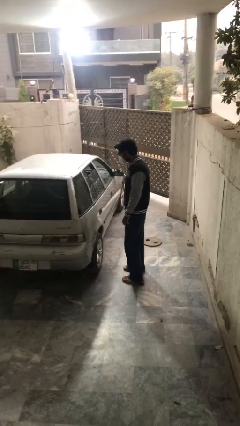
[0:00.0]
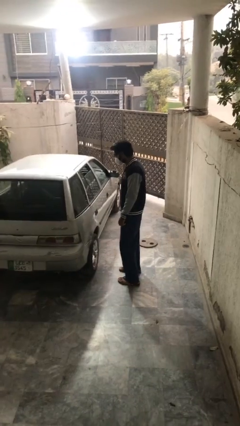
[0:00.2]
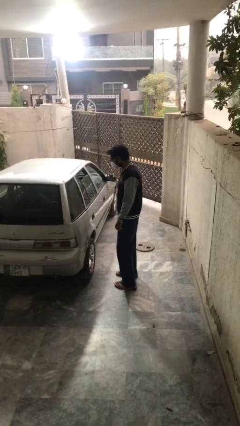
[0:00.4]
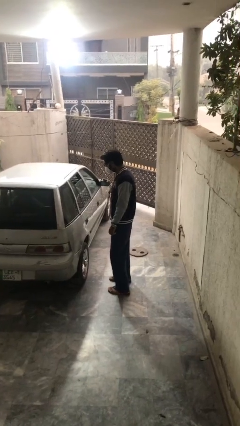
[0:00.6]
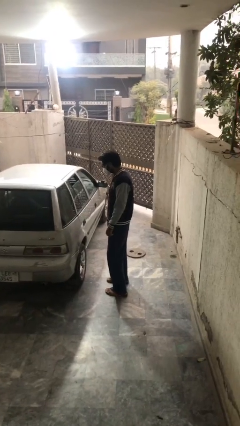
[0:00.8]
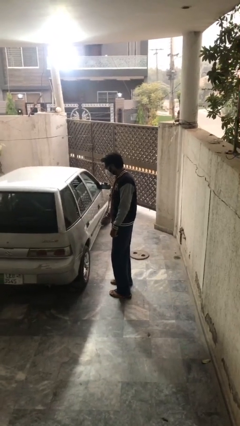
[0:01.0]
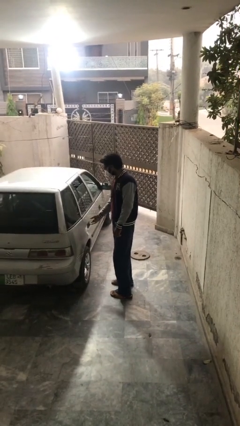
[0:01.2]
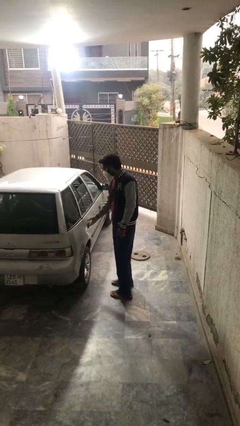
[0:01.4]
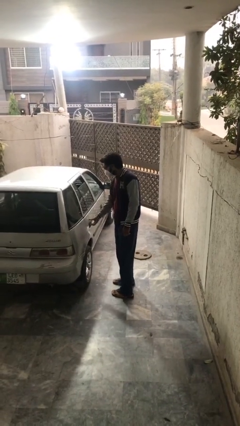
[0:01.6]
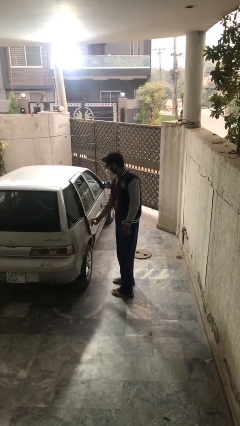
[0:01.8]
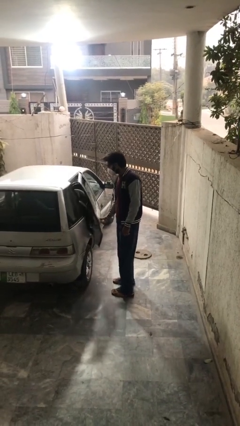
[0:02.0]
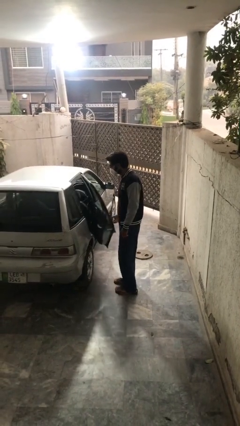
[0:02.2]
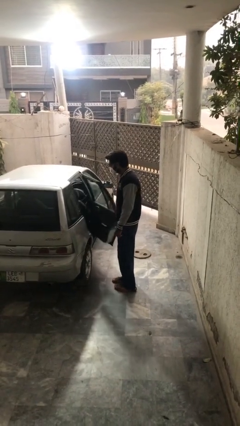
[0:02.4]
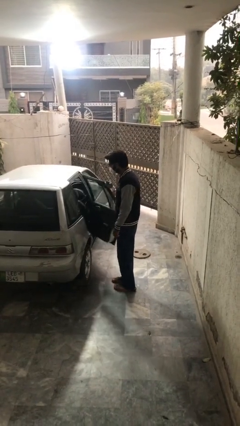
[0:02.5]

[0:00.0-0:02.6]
person opens car door

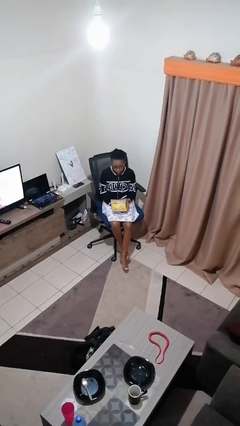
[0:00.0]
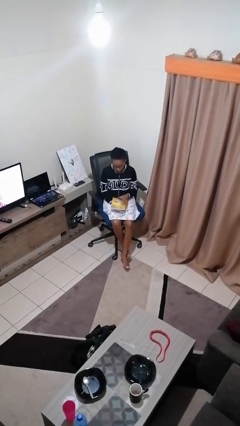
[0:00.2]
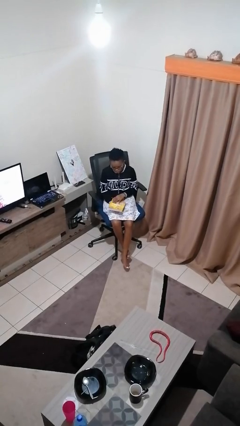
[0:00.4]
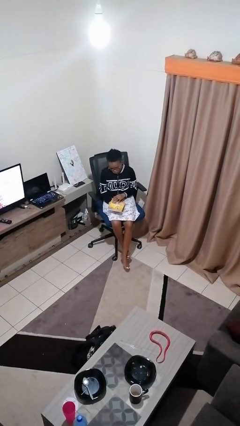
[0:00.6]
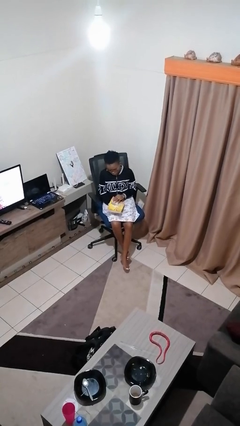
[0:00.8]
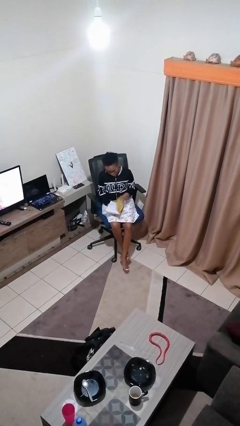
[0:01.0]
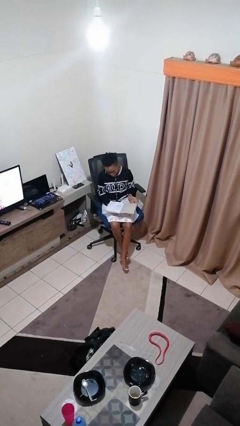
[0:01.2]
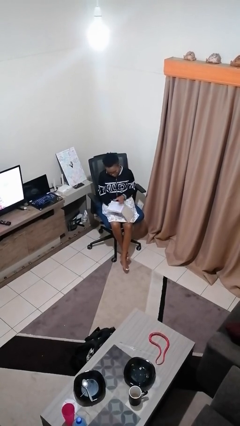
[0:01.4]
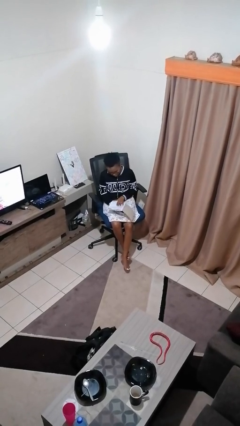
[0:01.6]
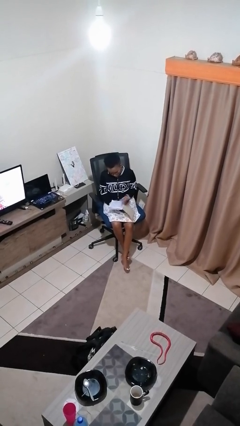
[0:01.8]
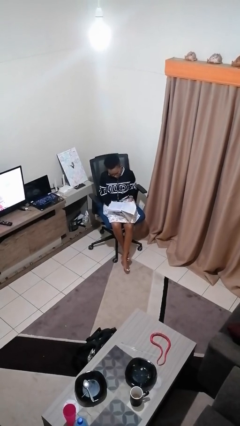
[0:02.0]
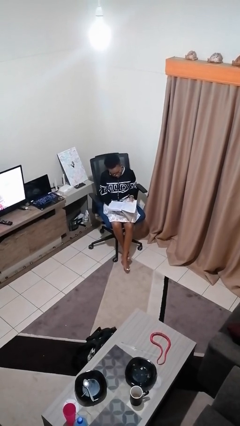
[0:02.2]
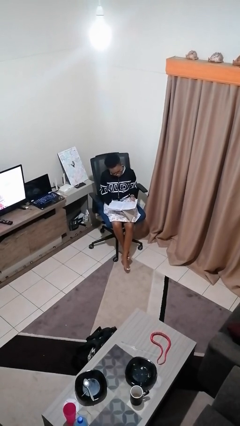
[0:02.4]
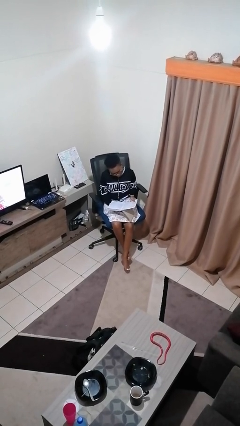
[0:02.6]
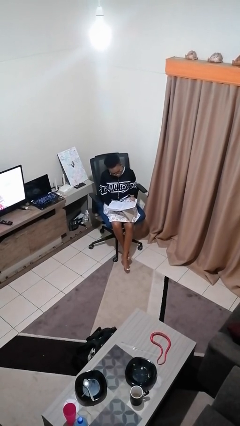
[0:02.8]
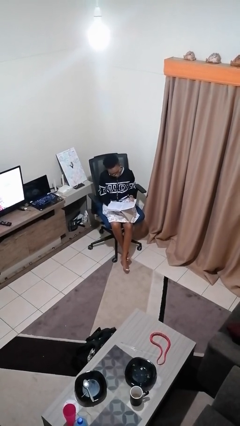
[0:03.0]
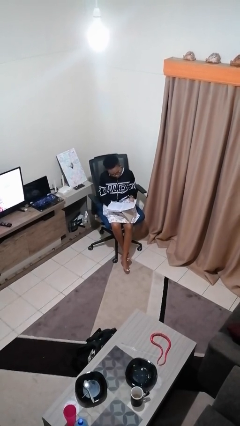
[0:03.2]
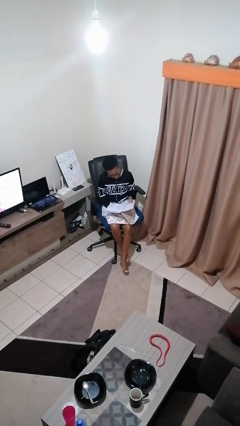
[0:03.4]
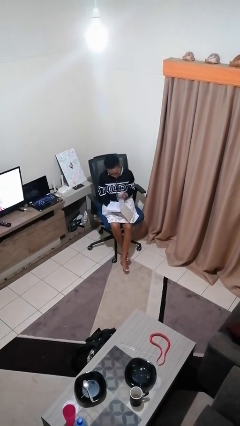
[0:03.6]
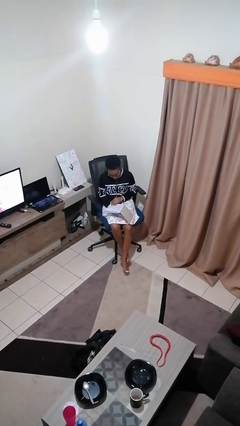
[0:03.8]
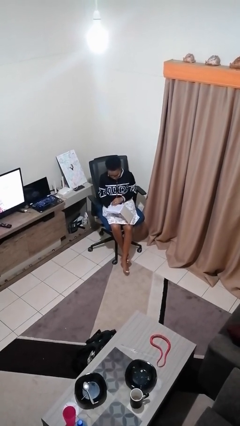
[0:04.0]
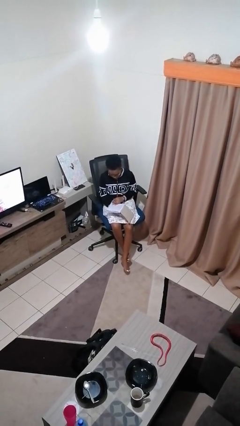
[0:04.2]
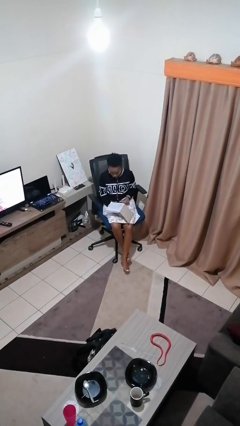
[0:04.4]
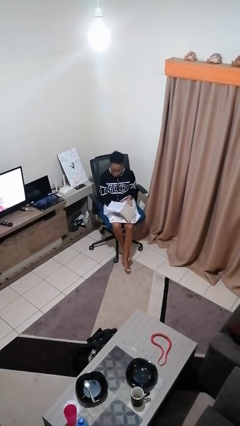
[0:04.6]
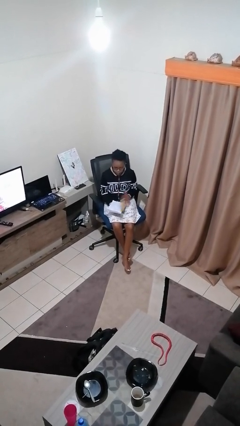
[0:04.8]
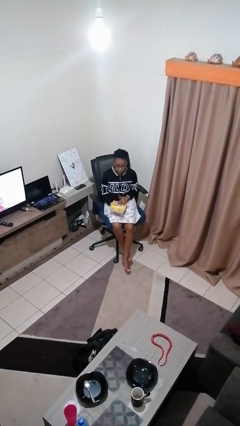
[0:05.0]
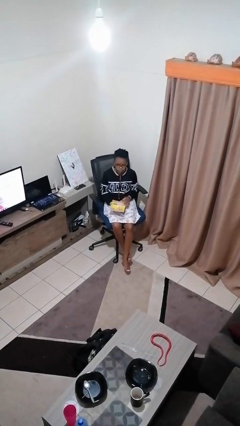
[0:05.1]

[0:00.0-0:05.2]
person reads book

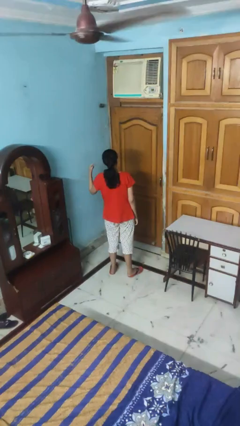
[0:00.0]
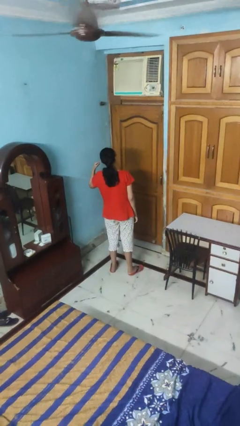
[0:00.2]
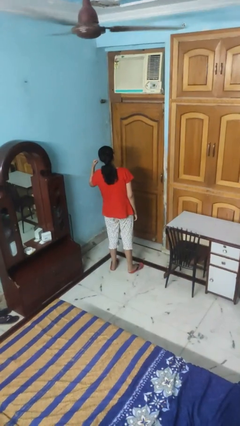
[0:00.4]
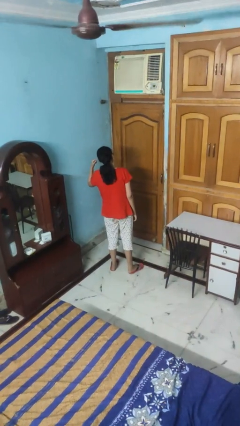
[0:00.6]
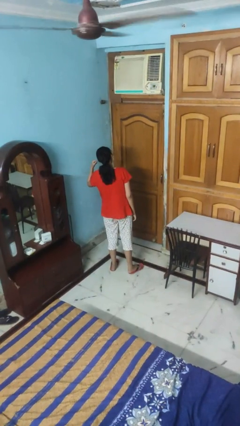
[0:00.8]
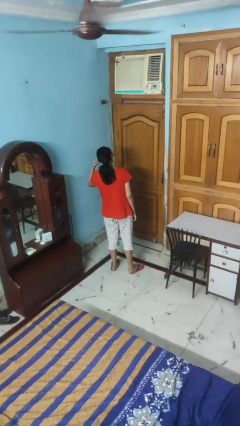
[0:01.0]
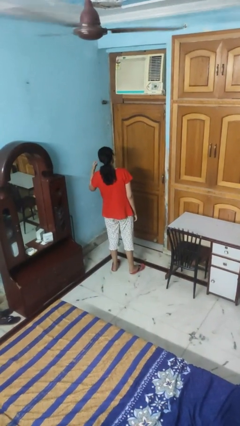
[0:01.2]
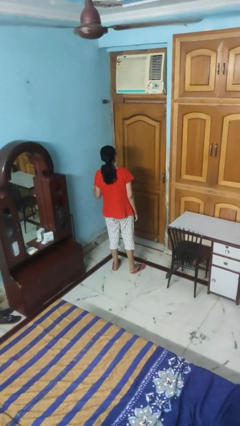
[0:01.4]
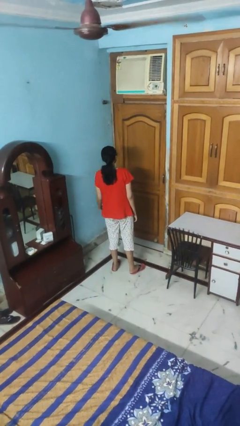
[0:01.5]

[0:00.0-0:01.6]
person gestures listen closely

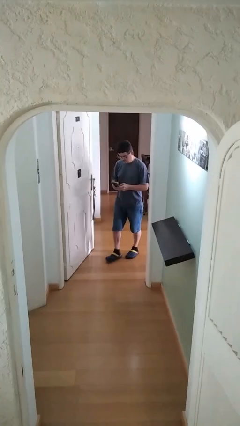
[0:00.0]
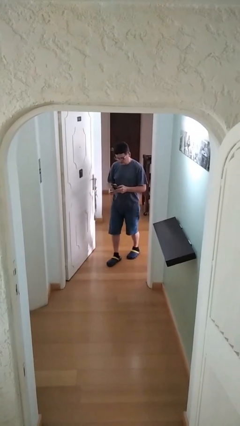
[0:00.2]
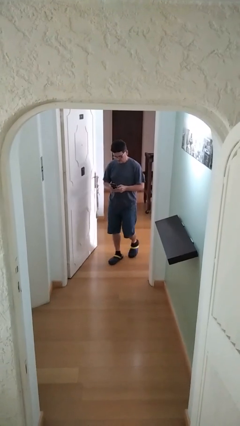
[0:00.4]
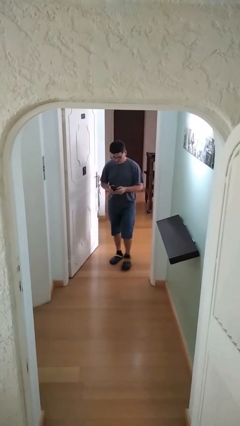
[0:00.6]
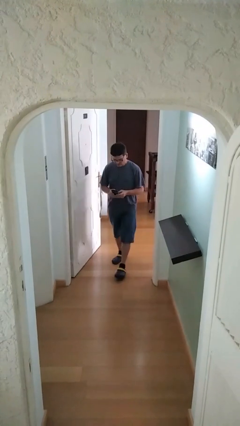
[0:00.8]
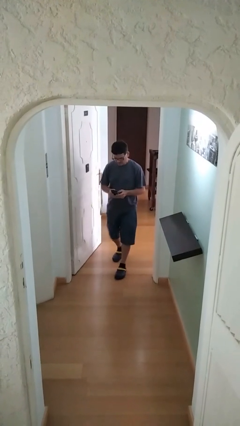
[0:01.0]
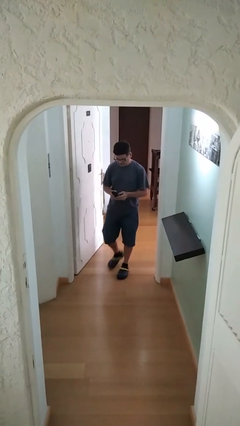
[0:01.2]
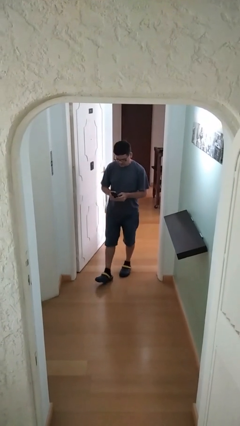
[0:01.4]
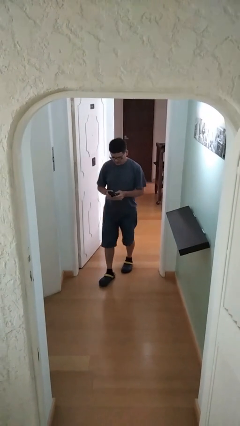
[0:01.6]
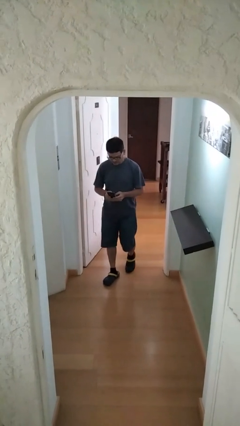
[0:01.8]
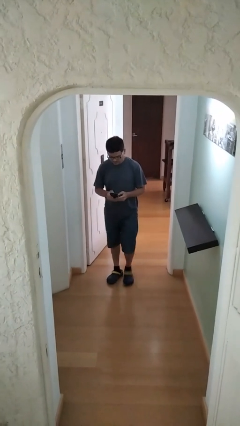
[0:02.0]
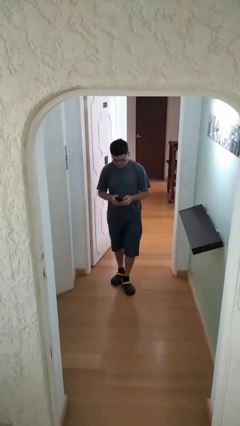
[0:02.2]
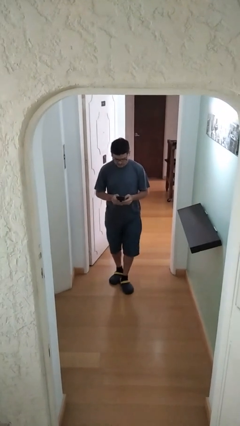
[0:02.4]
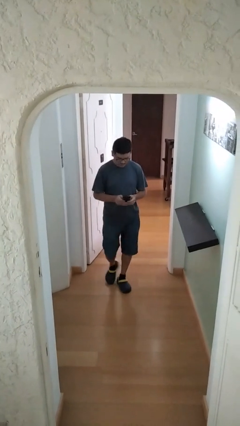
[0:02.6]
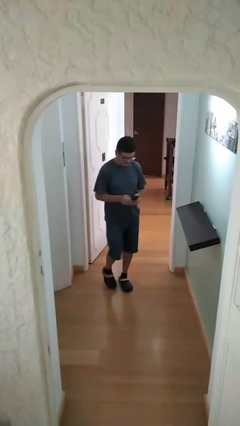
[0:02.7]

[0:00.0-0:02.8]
person enters scene through structure

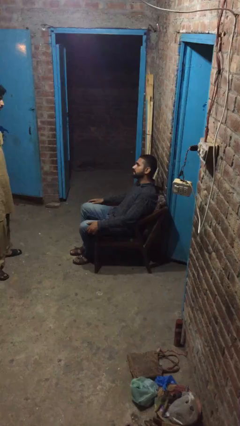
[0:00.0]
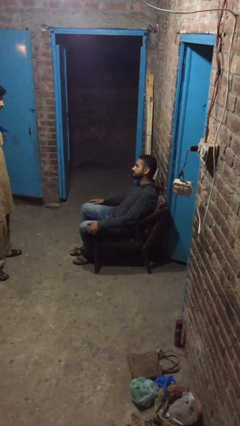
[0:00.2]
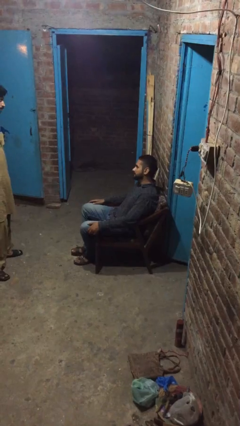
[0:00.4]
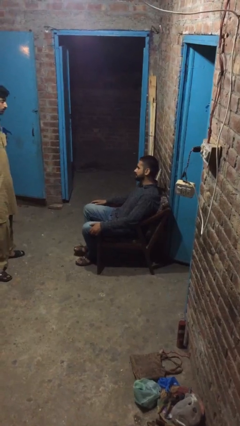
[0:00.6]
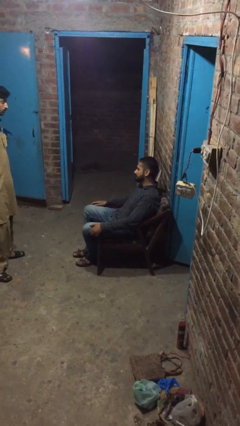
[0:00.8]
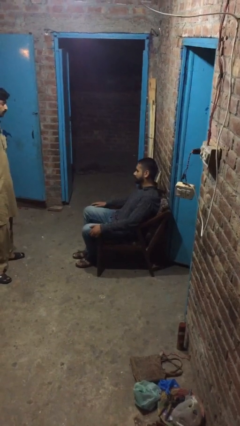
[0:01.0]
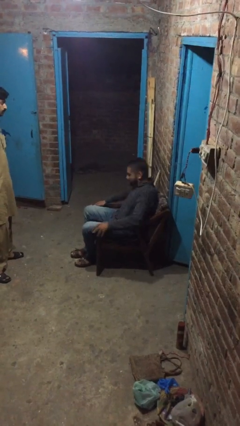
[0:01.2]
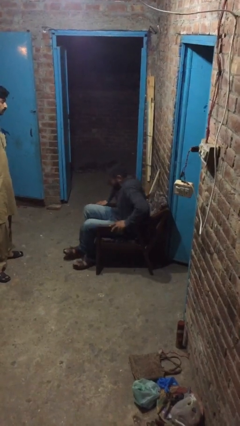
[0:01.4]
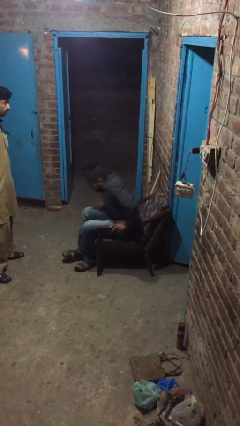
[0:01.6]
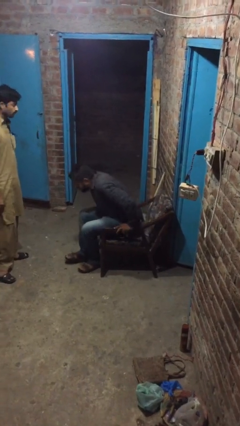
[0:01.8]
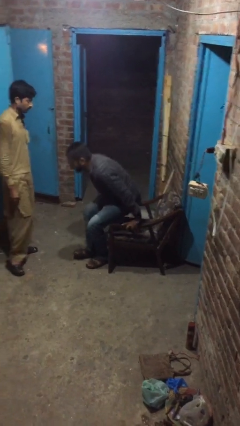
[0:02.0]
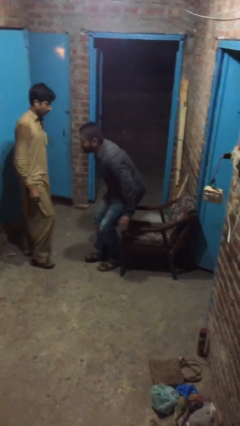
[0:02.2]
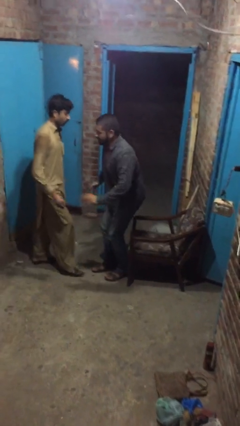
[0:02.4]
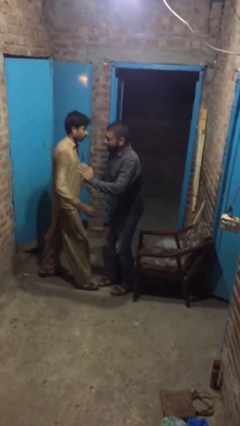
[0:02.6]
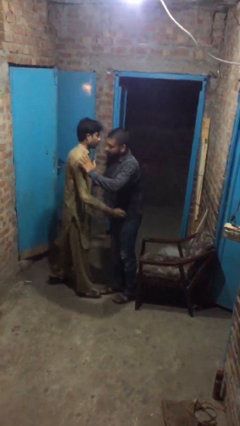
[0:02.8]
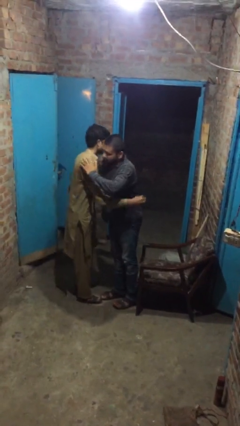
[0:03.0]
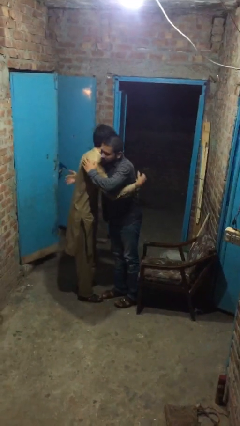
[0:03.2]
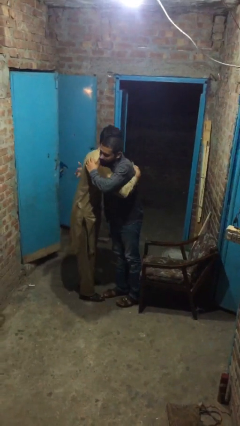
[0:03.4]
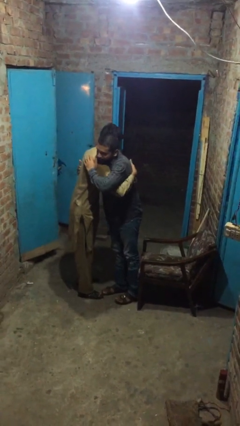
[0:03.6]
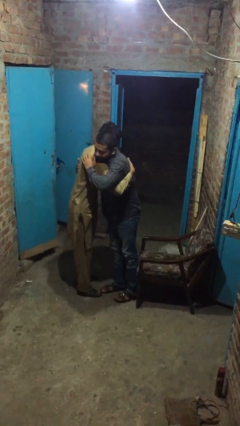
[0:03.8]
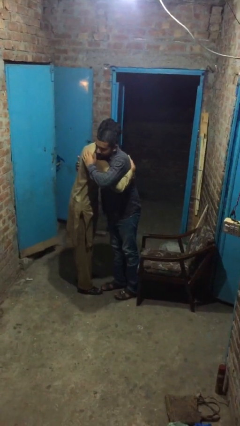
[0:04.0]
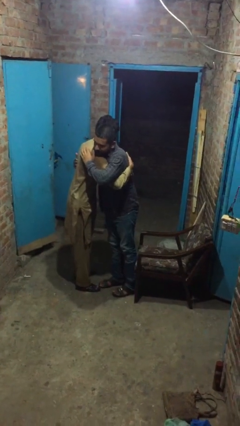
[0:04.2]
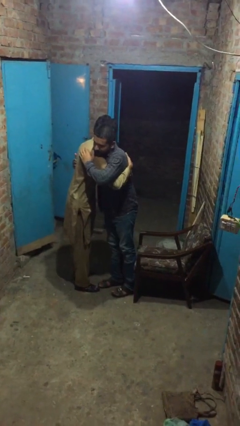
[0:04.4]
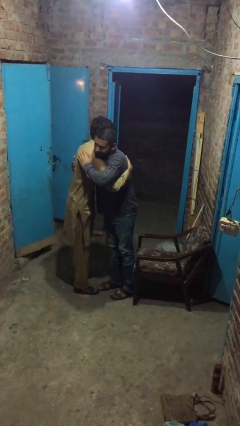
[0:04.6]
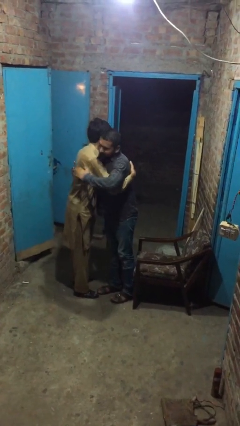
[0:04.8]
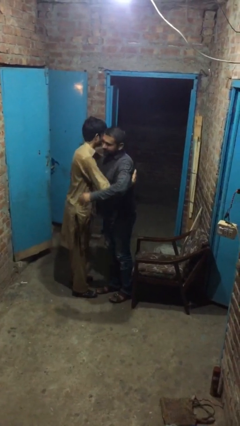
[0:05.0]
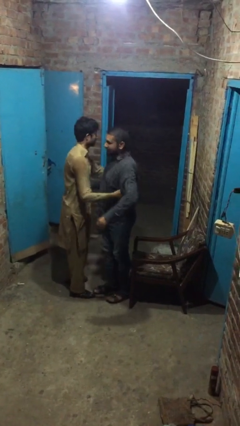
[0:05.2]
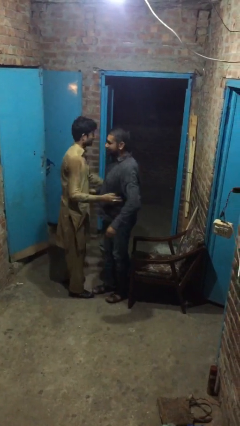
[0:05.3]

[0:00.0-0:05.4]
person embraces person
